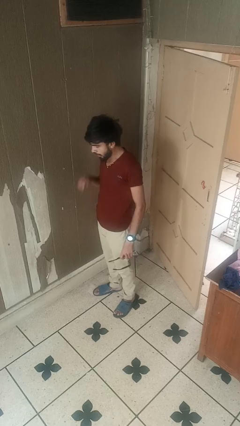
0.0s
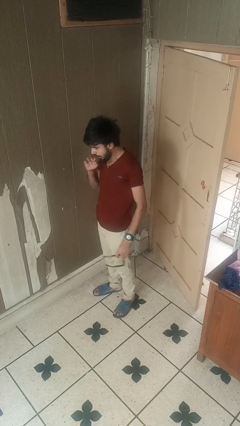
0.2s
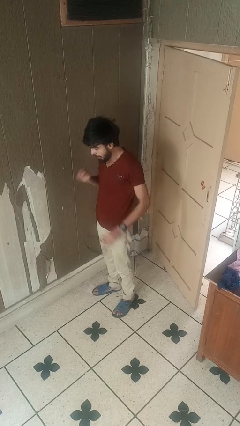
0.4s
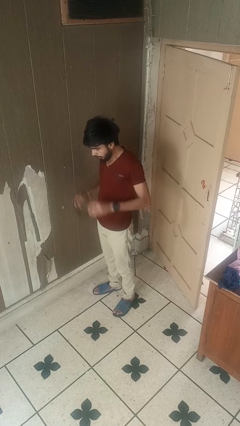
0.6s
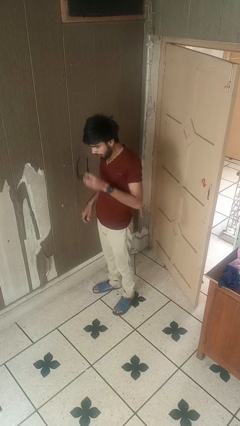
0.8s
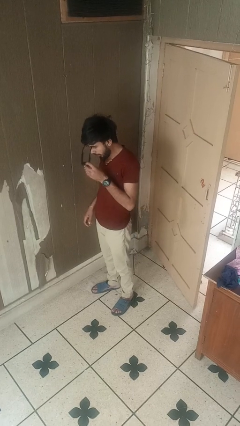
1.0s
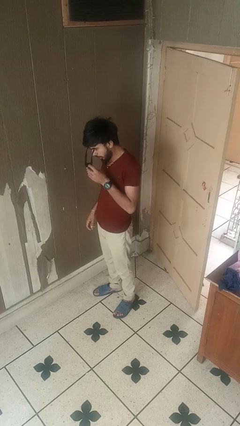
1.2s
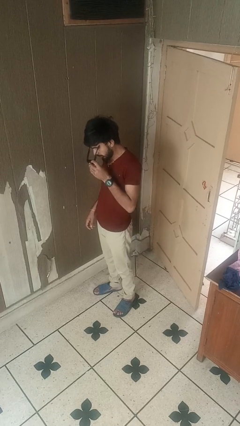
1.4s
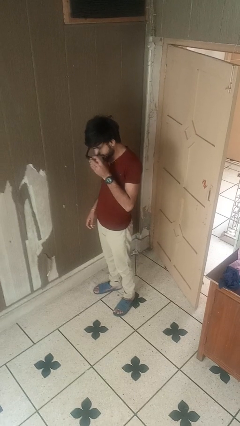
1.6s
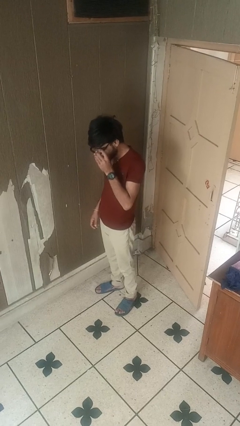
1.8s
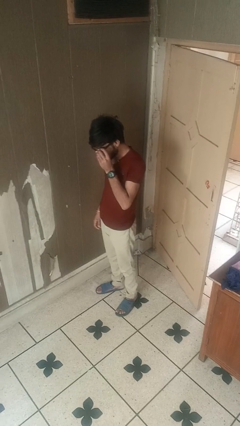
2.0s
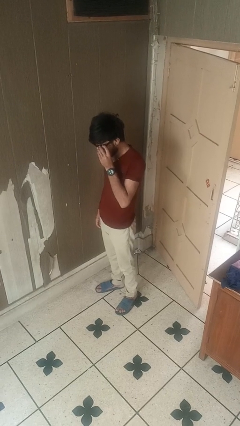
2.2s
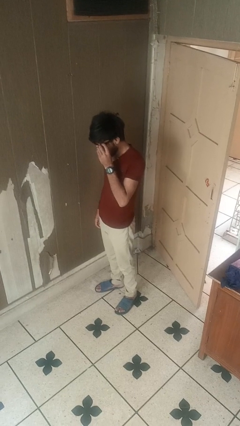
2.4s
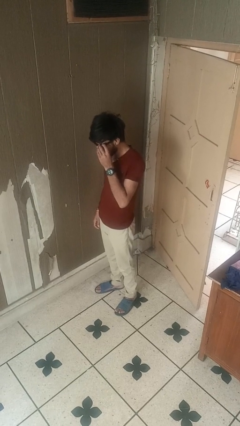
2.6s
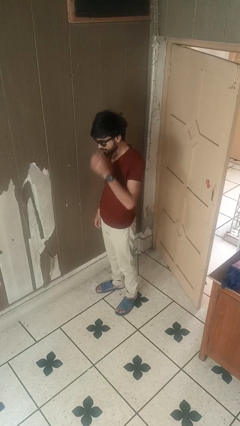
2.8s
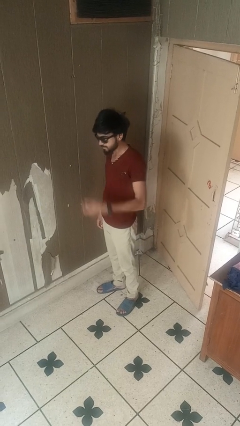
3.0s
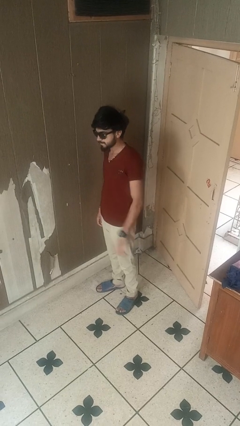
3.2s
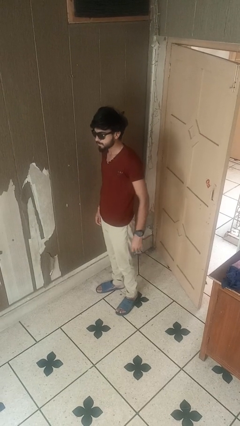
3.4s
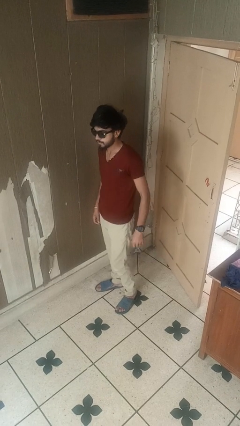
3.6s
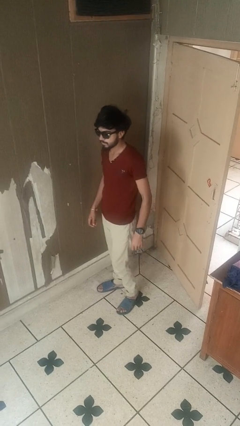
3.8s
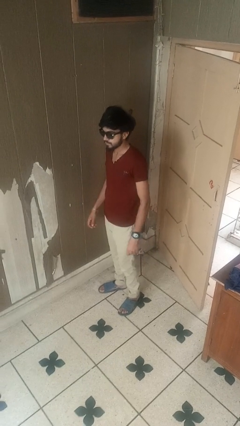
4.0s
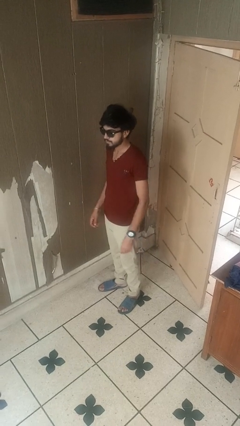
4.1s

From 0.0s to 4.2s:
person puts on sunglasses

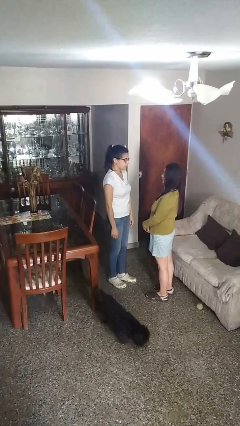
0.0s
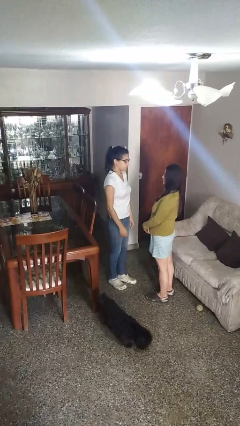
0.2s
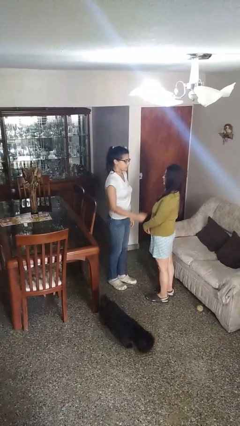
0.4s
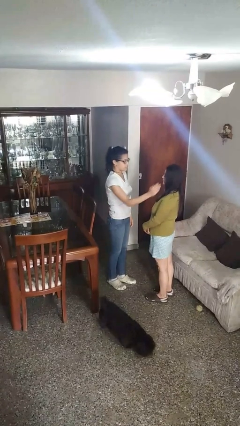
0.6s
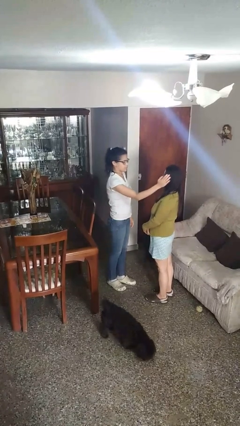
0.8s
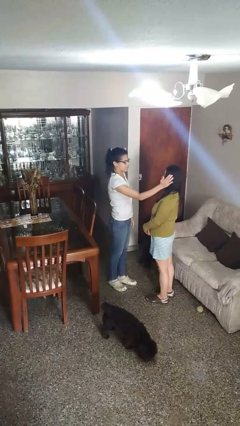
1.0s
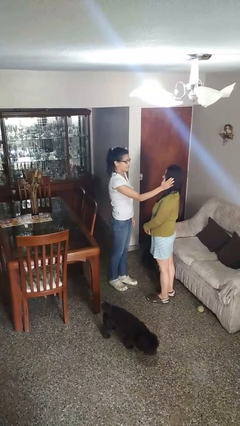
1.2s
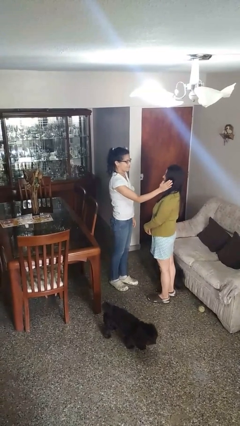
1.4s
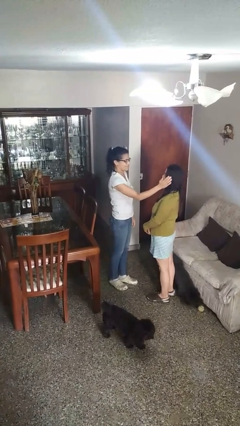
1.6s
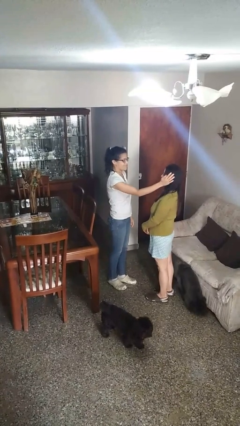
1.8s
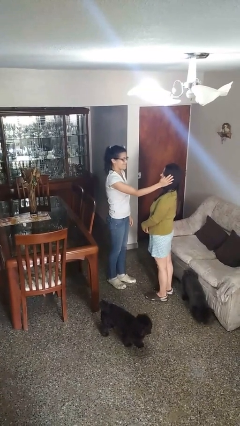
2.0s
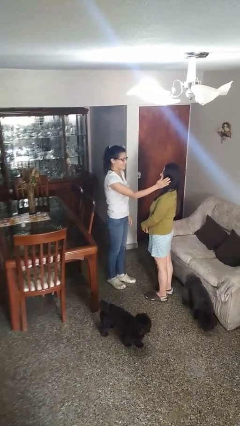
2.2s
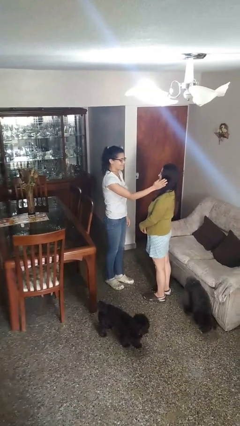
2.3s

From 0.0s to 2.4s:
person touches face of person

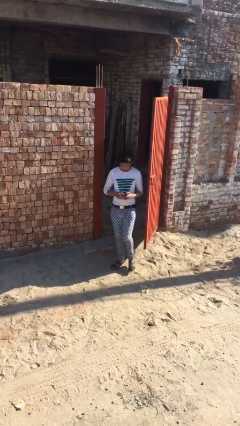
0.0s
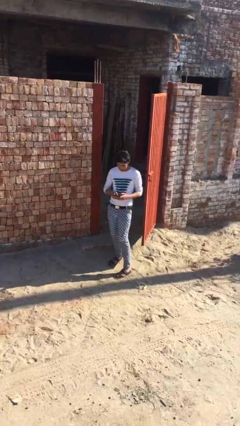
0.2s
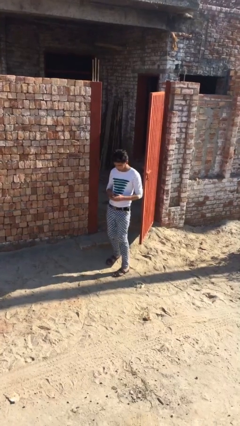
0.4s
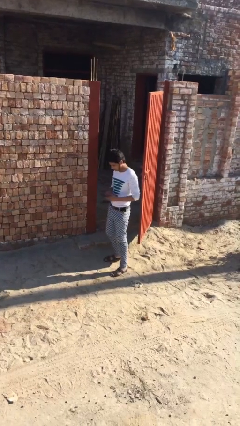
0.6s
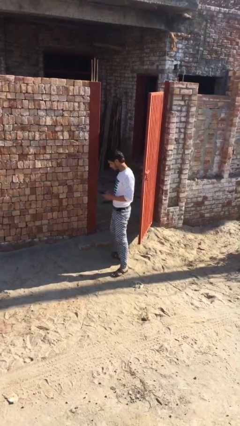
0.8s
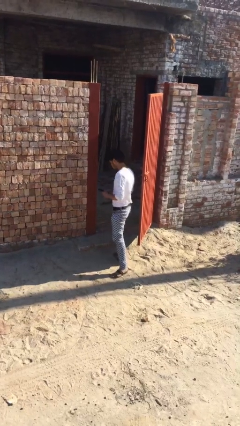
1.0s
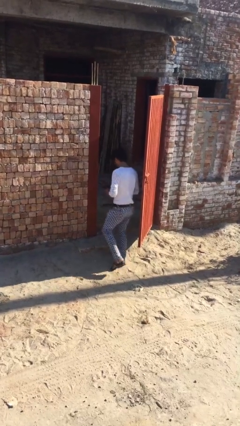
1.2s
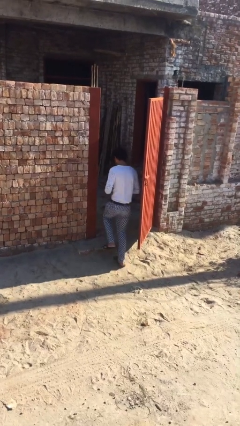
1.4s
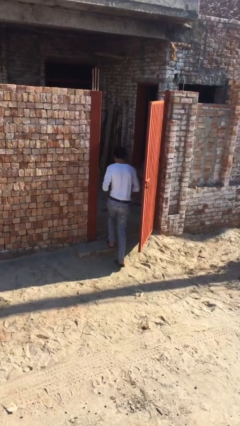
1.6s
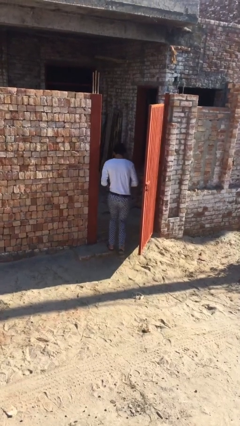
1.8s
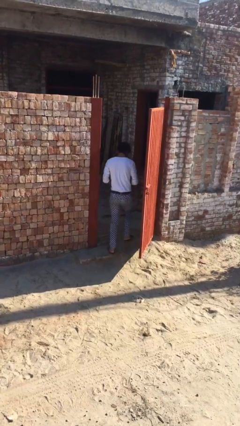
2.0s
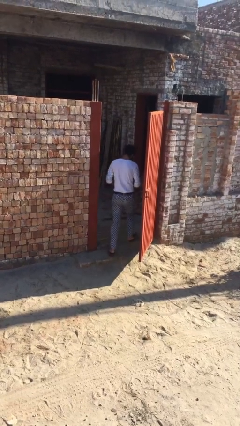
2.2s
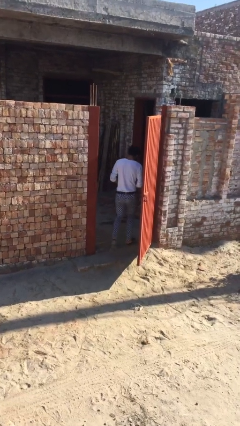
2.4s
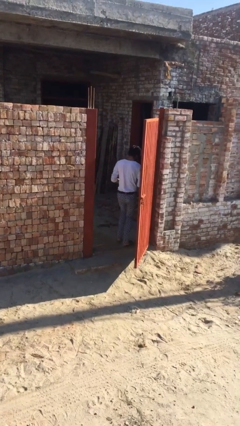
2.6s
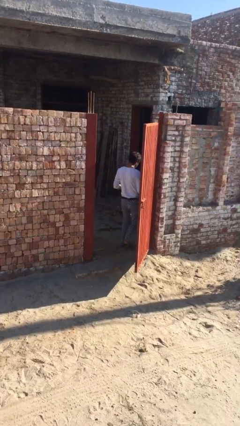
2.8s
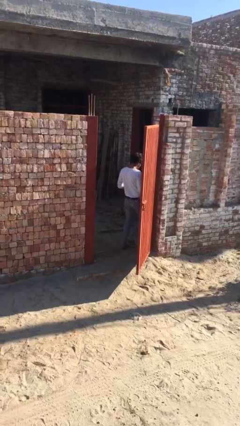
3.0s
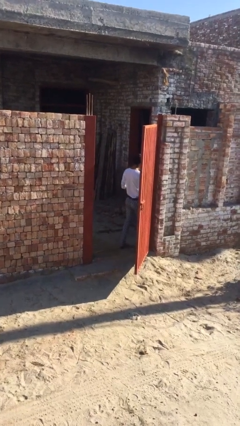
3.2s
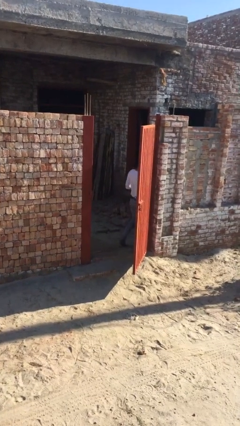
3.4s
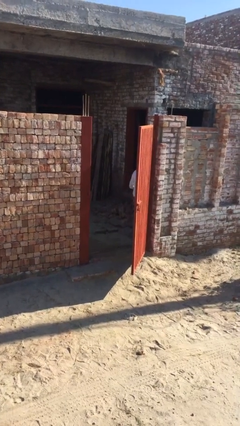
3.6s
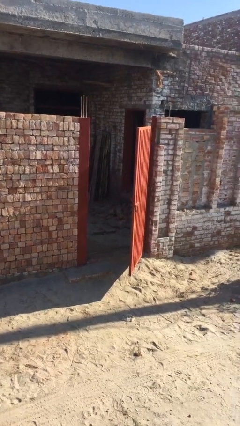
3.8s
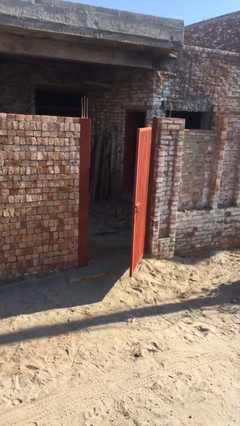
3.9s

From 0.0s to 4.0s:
person exits scene through structure

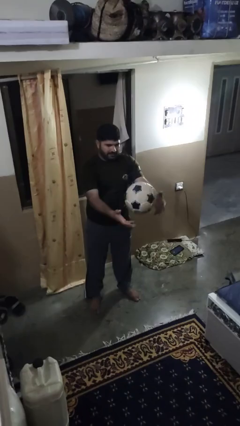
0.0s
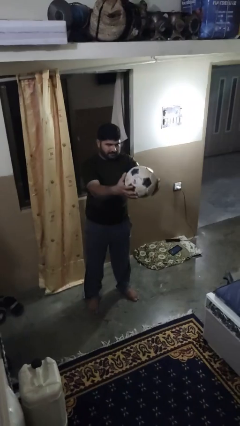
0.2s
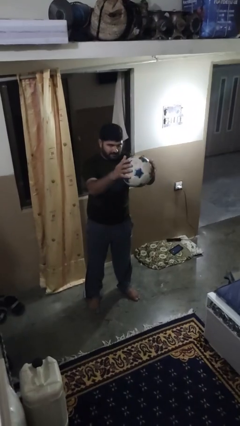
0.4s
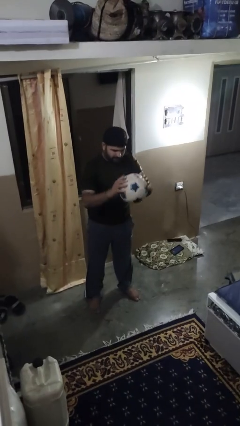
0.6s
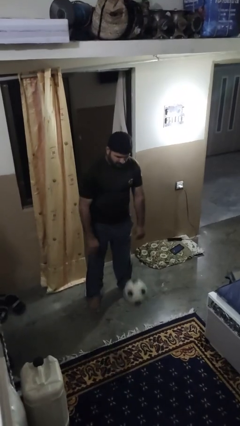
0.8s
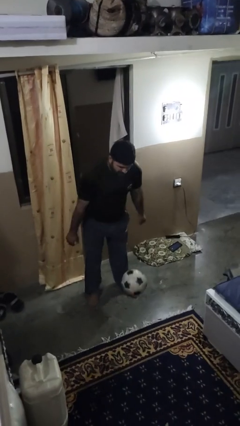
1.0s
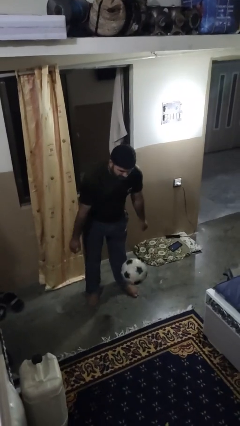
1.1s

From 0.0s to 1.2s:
person bounces ball on floor

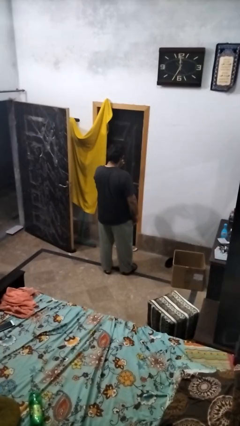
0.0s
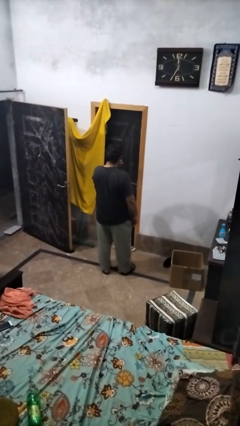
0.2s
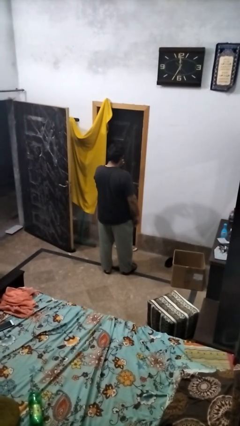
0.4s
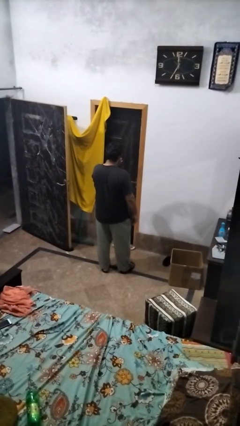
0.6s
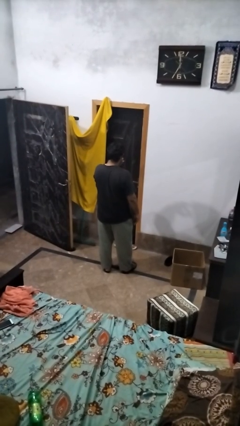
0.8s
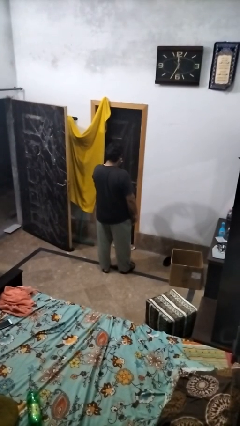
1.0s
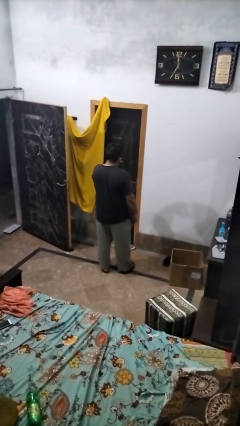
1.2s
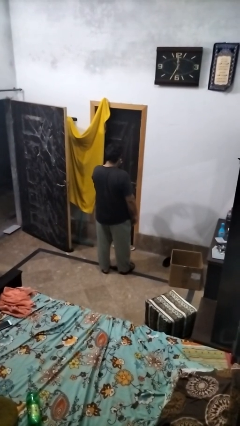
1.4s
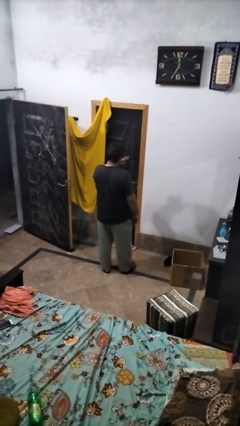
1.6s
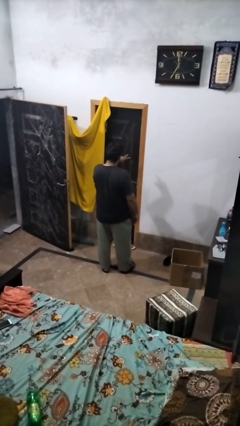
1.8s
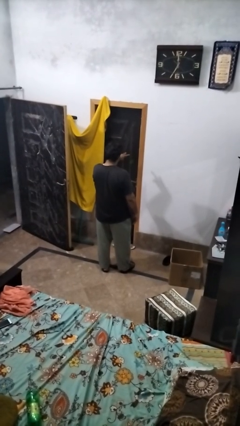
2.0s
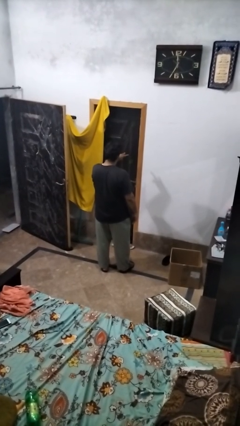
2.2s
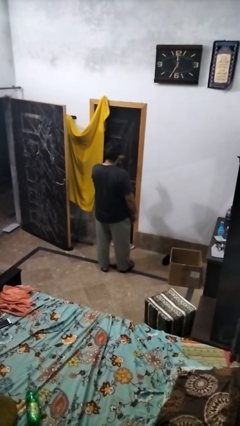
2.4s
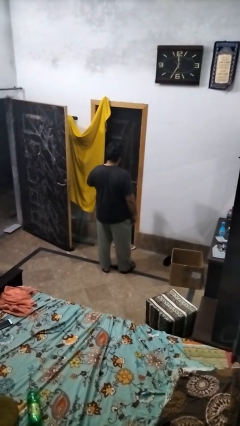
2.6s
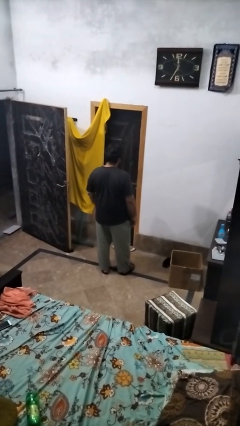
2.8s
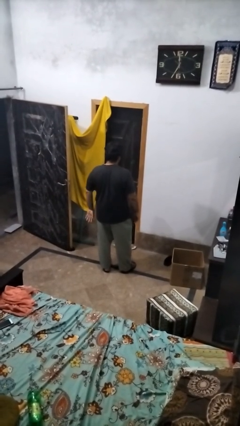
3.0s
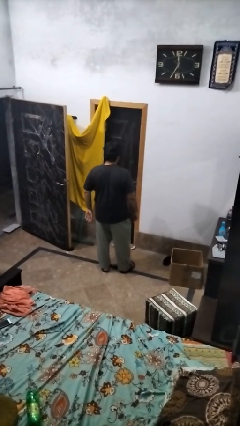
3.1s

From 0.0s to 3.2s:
person gestures watch closely

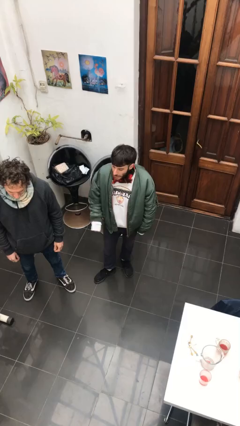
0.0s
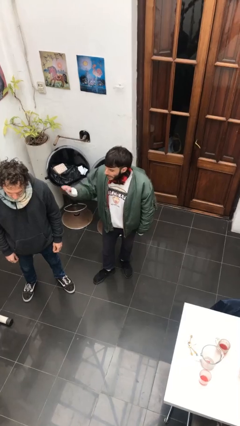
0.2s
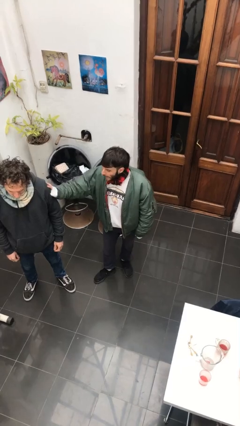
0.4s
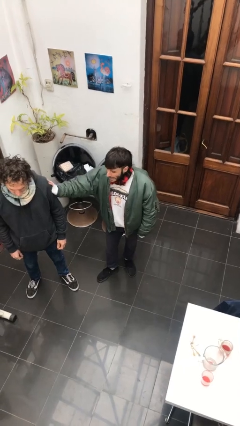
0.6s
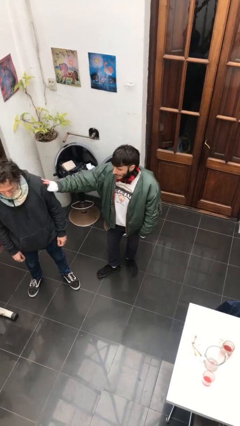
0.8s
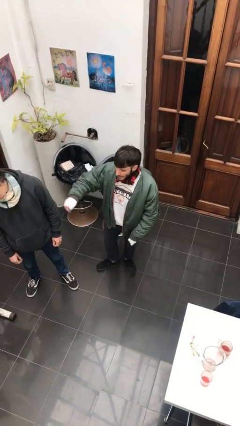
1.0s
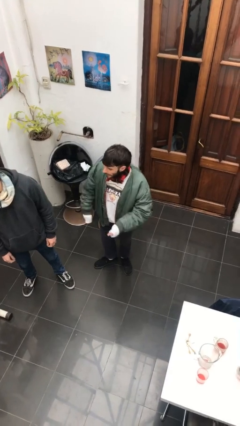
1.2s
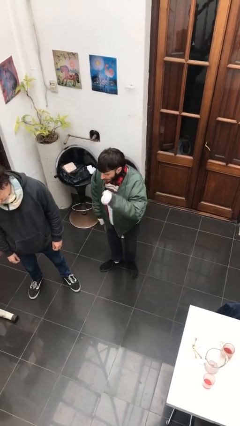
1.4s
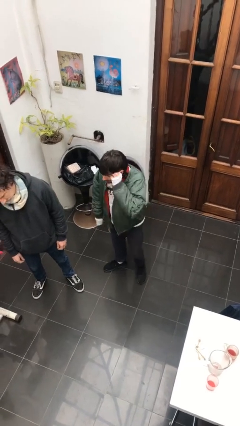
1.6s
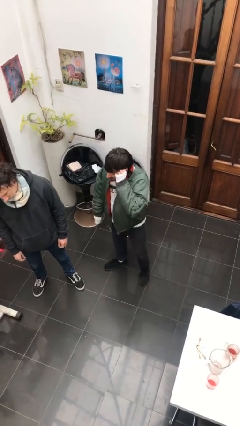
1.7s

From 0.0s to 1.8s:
person shoves person

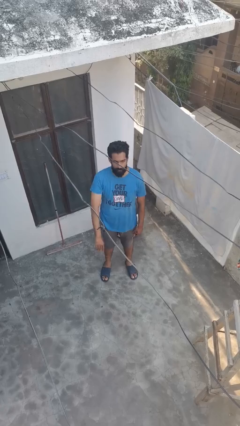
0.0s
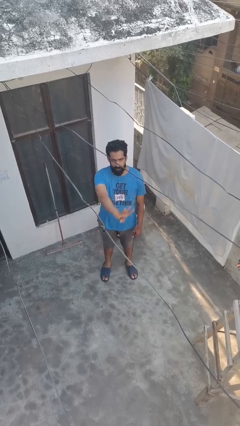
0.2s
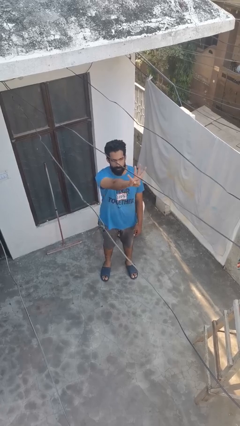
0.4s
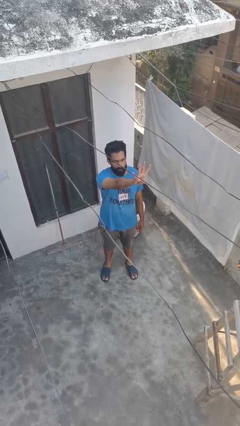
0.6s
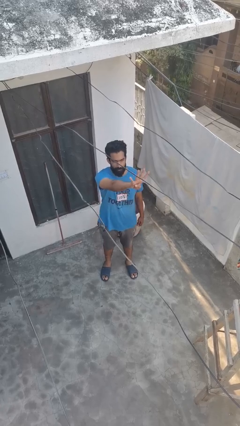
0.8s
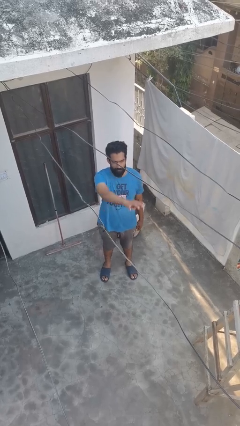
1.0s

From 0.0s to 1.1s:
person gestures number four
